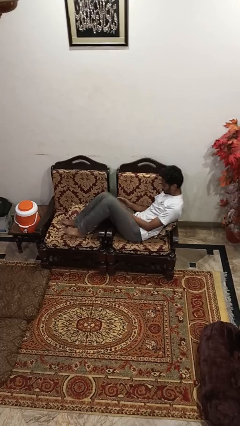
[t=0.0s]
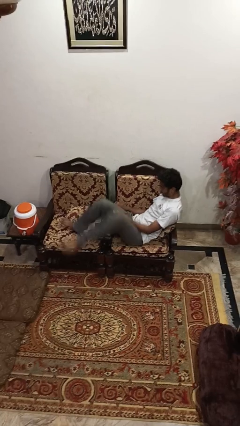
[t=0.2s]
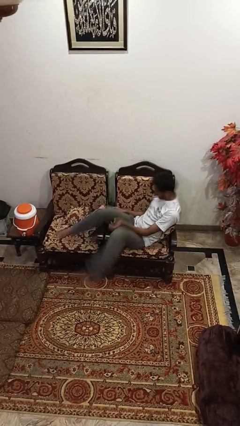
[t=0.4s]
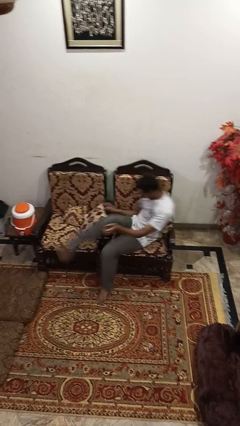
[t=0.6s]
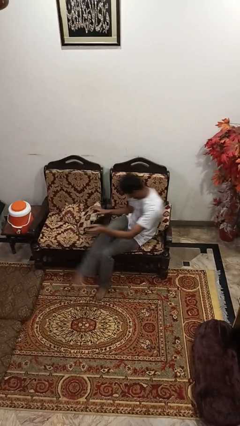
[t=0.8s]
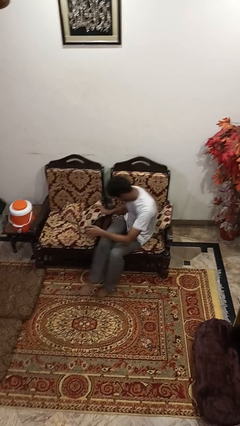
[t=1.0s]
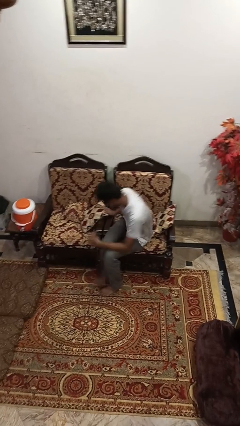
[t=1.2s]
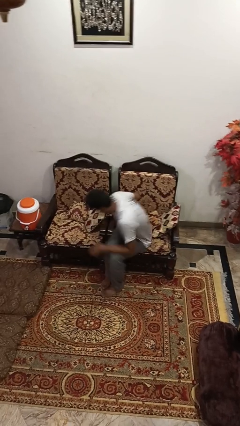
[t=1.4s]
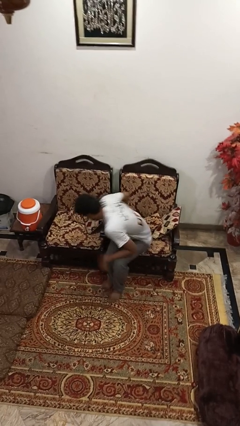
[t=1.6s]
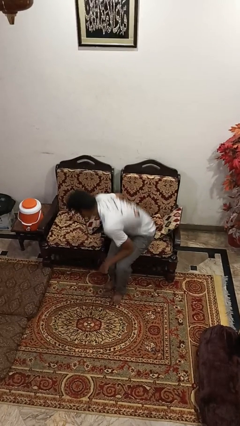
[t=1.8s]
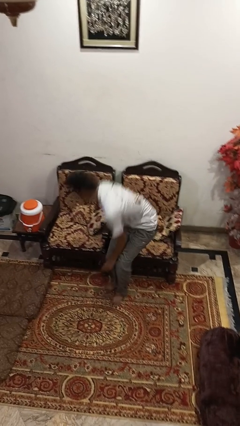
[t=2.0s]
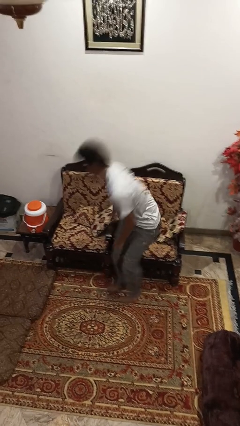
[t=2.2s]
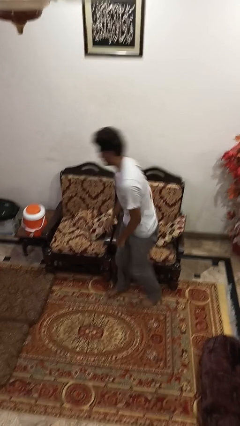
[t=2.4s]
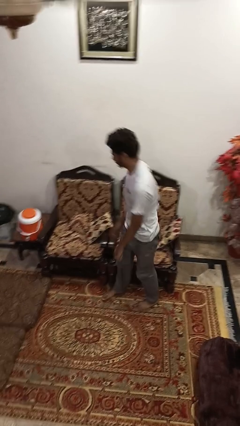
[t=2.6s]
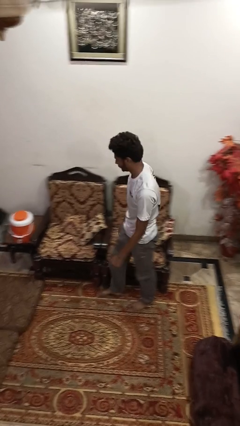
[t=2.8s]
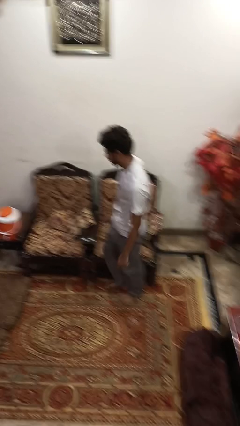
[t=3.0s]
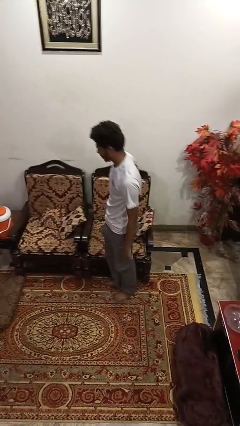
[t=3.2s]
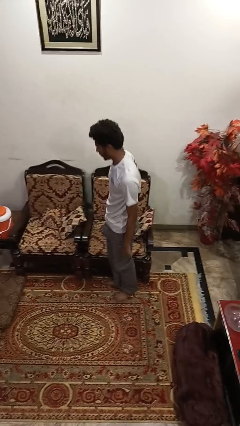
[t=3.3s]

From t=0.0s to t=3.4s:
person stands up

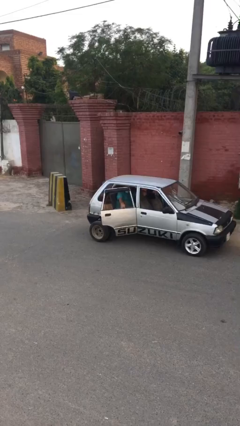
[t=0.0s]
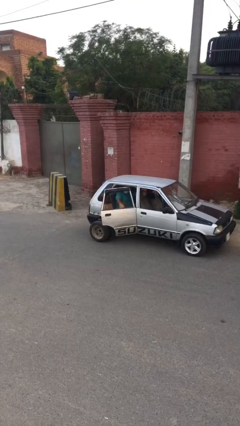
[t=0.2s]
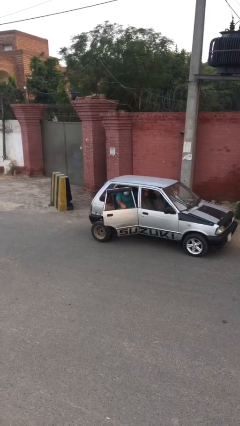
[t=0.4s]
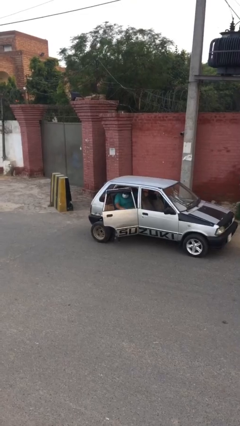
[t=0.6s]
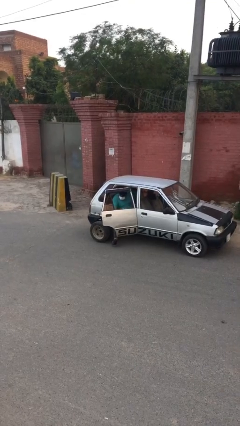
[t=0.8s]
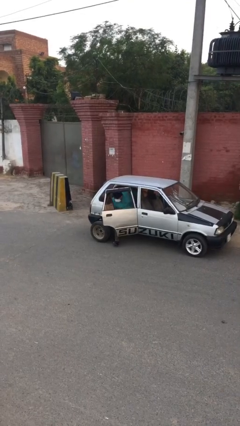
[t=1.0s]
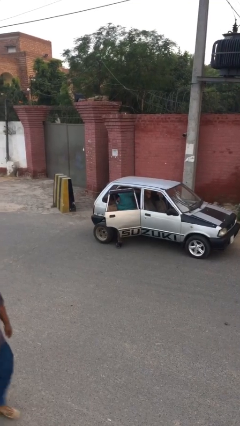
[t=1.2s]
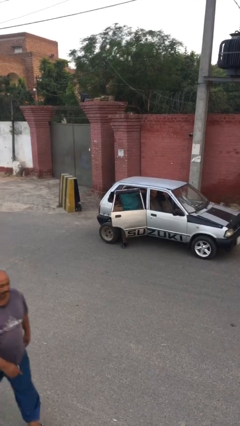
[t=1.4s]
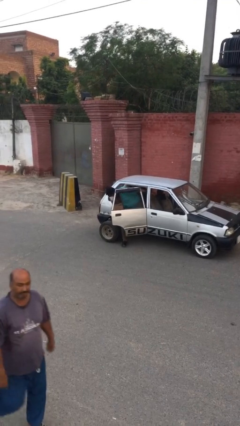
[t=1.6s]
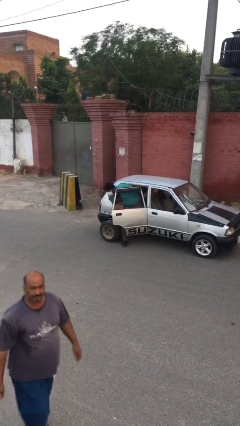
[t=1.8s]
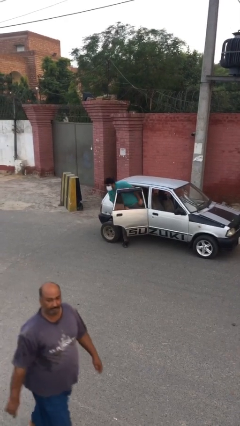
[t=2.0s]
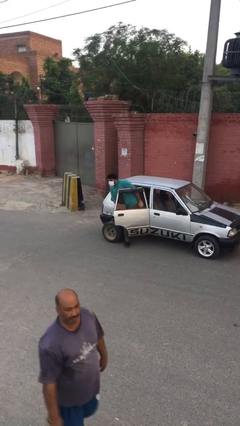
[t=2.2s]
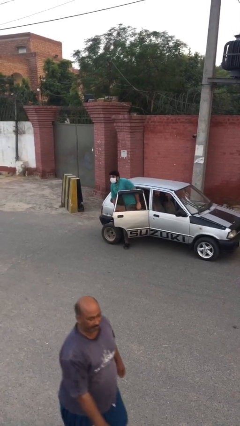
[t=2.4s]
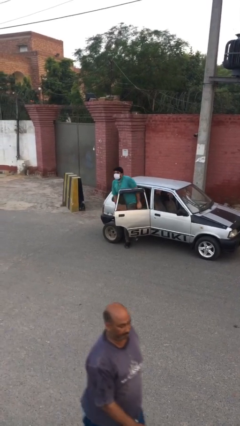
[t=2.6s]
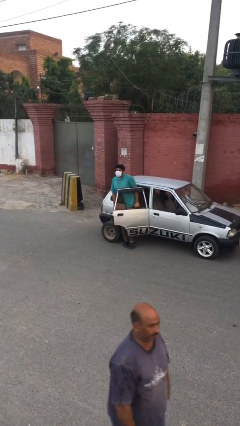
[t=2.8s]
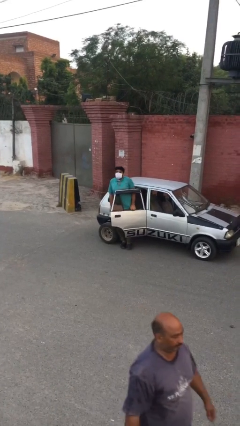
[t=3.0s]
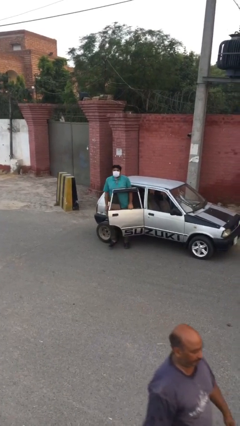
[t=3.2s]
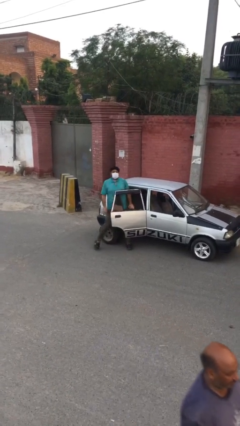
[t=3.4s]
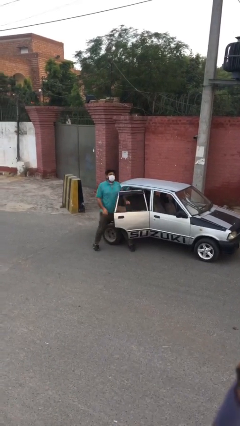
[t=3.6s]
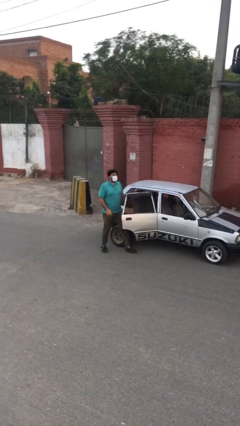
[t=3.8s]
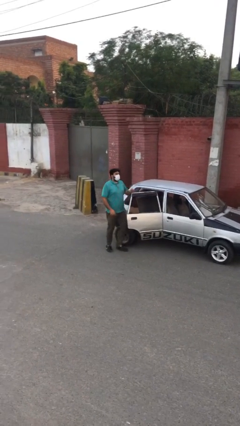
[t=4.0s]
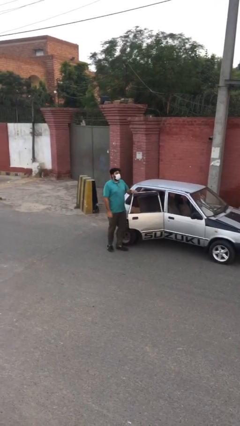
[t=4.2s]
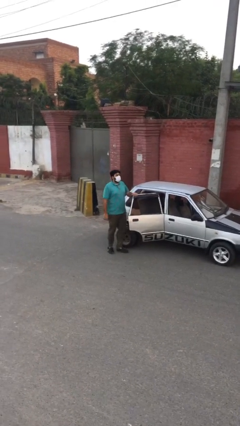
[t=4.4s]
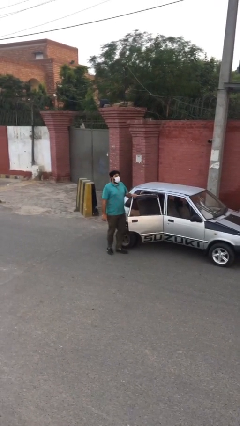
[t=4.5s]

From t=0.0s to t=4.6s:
person exits car

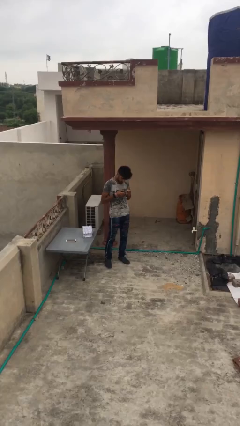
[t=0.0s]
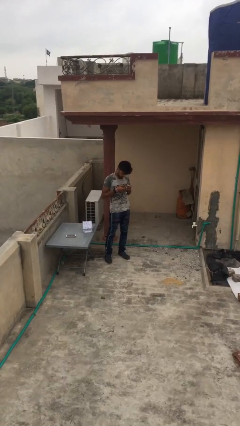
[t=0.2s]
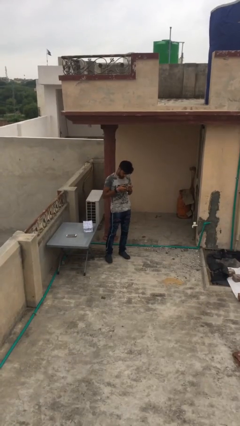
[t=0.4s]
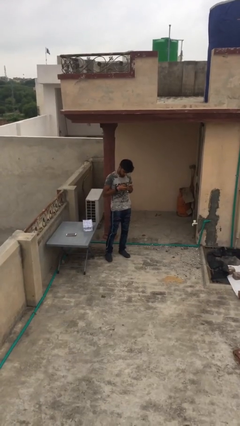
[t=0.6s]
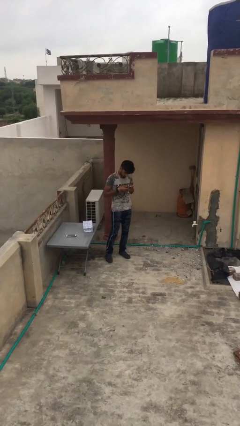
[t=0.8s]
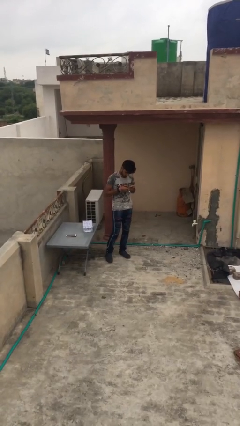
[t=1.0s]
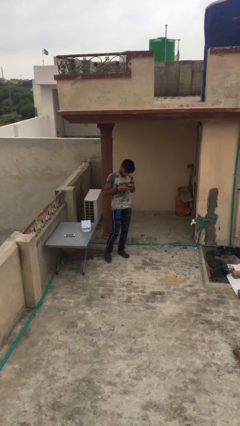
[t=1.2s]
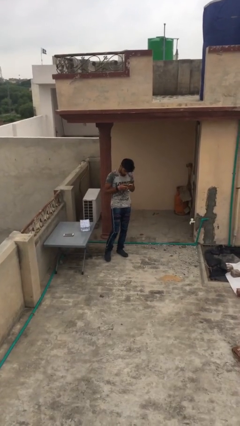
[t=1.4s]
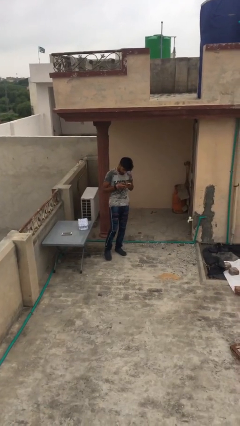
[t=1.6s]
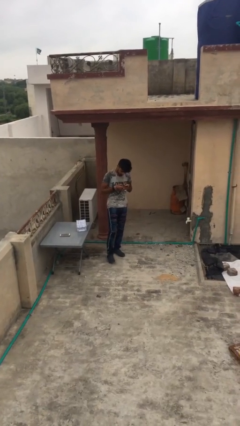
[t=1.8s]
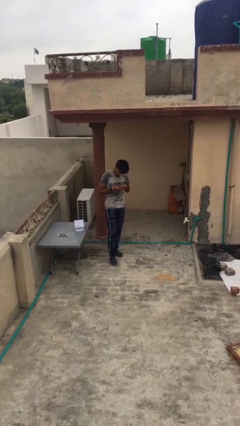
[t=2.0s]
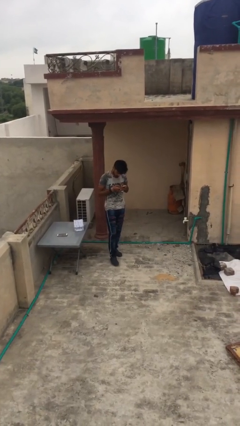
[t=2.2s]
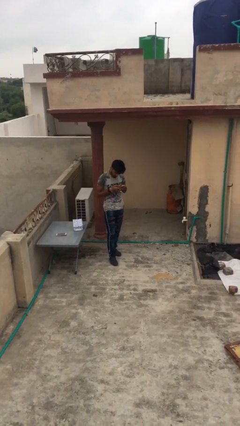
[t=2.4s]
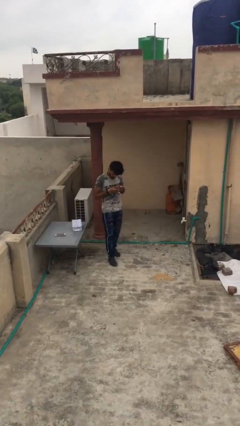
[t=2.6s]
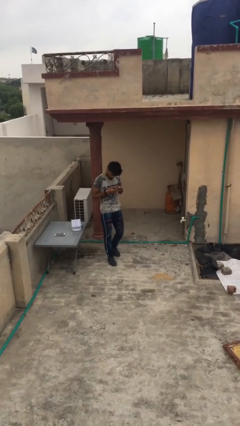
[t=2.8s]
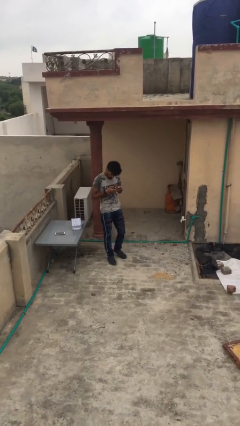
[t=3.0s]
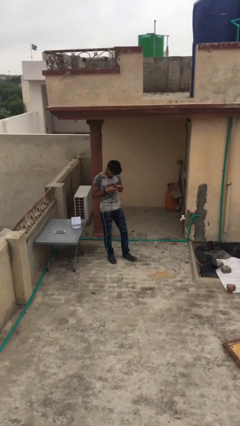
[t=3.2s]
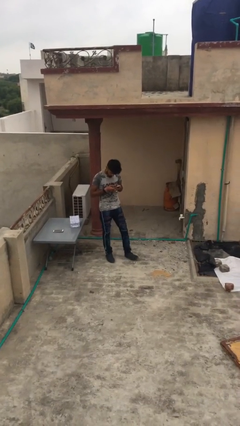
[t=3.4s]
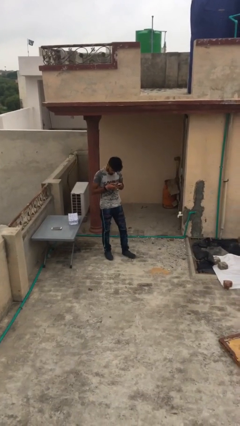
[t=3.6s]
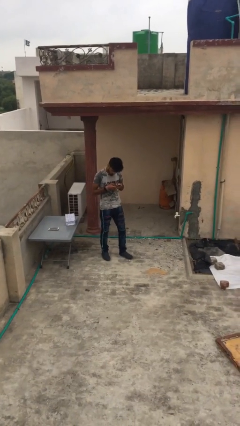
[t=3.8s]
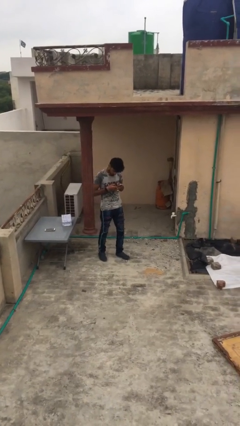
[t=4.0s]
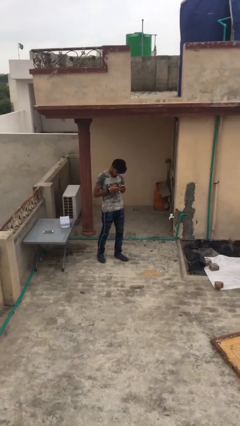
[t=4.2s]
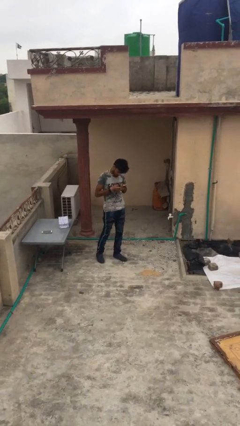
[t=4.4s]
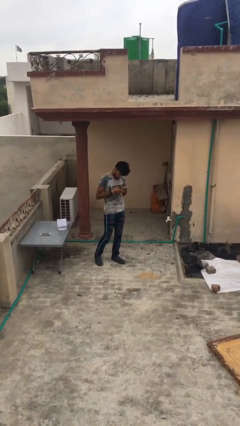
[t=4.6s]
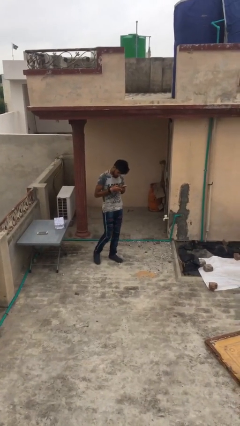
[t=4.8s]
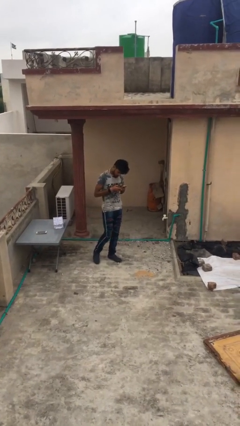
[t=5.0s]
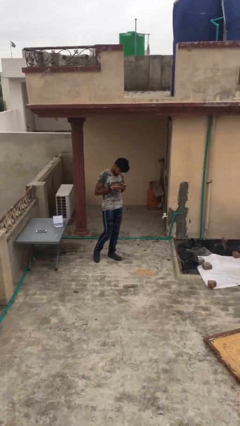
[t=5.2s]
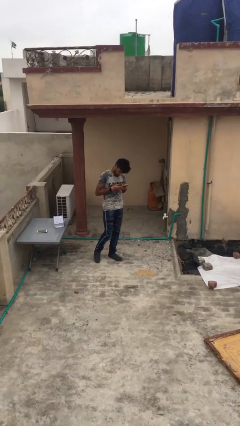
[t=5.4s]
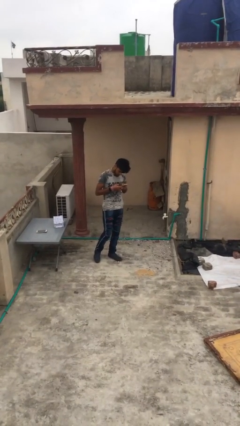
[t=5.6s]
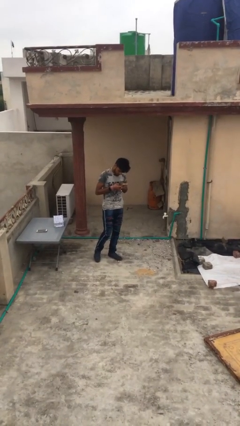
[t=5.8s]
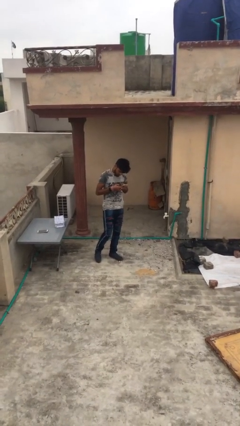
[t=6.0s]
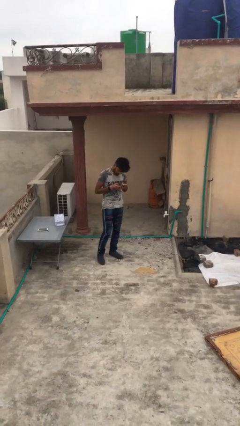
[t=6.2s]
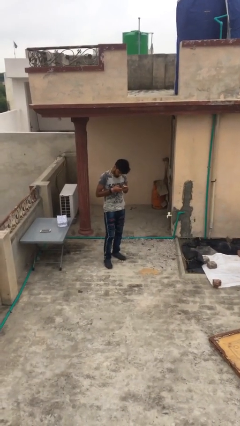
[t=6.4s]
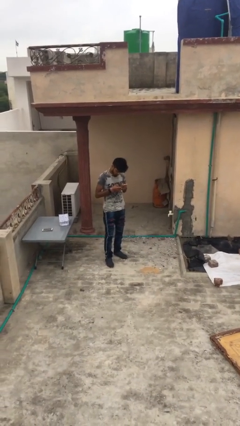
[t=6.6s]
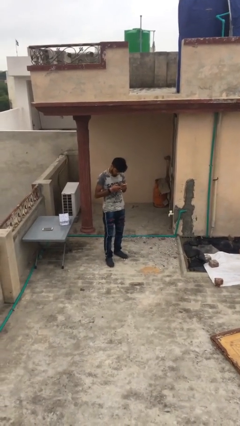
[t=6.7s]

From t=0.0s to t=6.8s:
person texts on phone

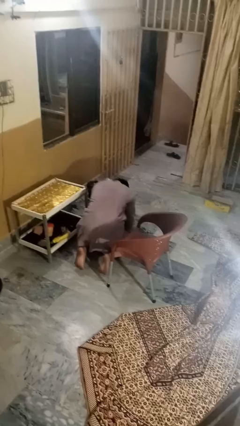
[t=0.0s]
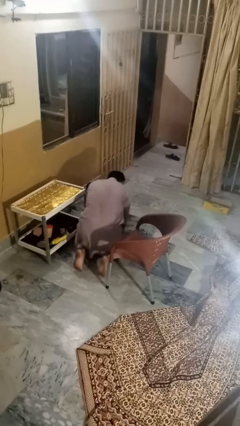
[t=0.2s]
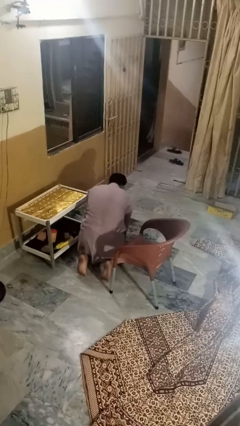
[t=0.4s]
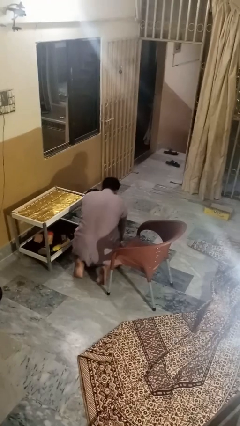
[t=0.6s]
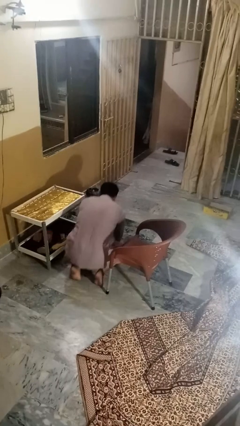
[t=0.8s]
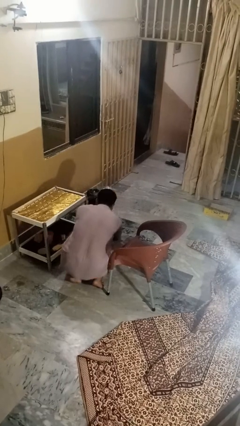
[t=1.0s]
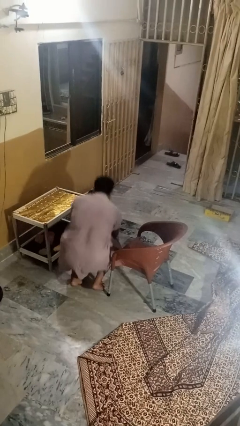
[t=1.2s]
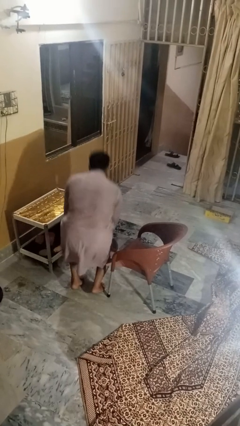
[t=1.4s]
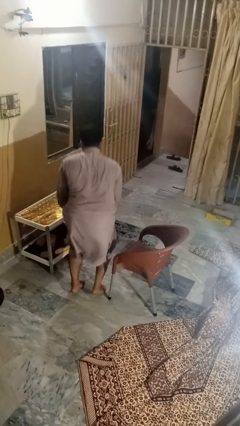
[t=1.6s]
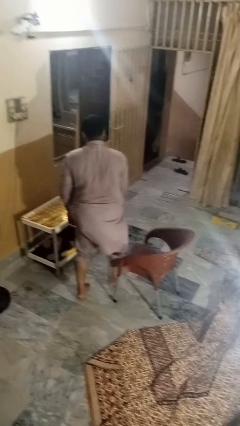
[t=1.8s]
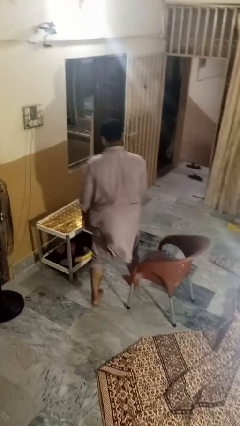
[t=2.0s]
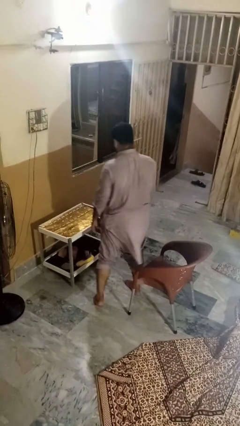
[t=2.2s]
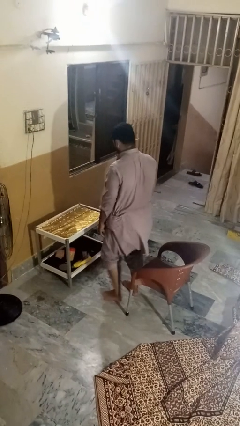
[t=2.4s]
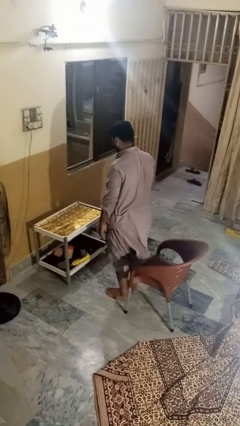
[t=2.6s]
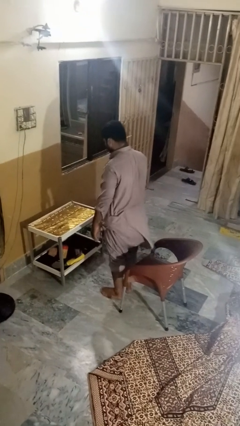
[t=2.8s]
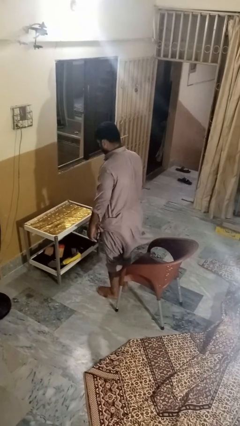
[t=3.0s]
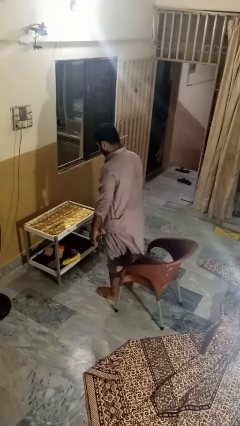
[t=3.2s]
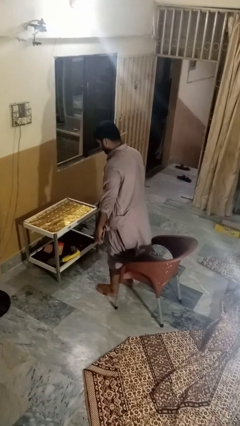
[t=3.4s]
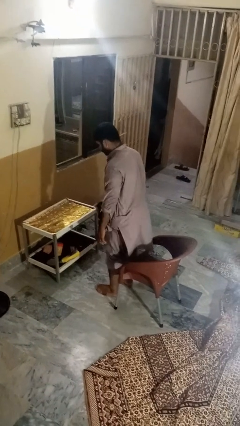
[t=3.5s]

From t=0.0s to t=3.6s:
person stands up from floor
